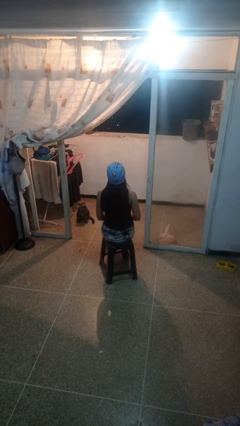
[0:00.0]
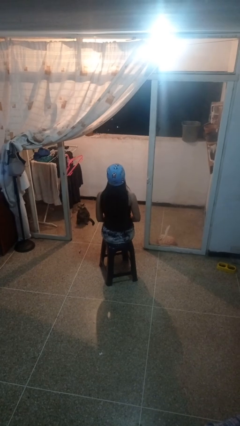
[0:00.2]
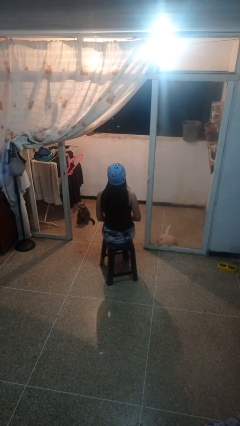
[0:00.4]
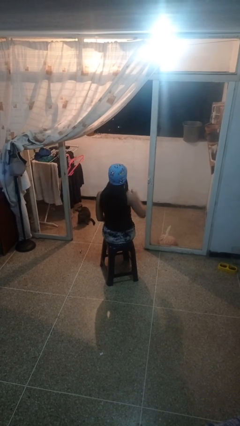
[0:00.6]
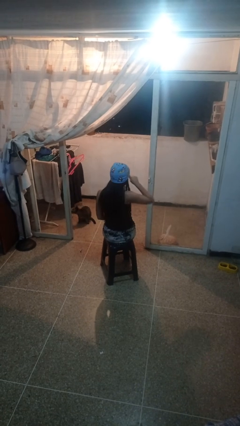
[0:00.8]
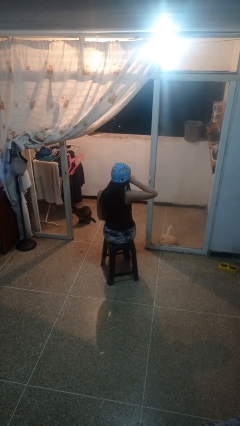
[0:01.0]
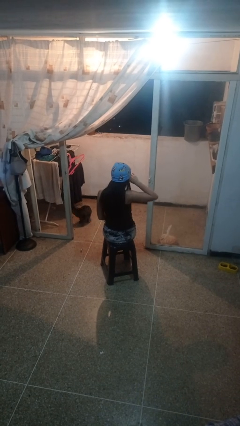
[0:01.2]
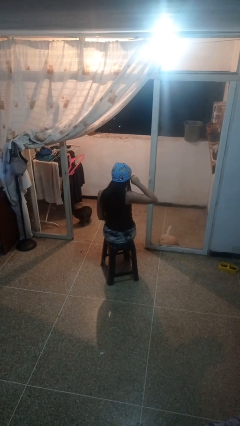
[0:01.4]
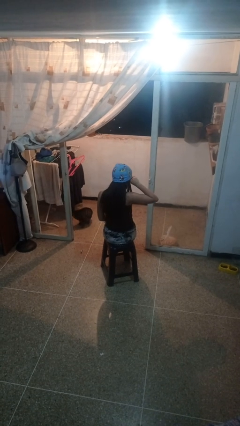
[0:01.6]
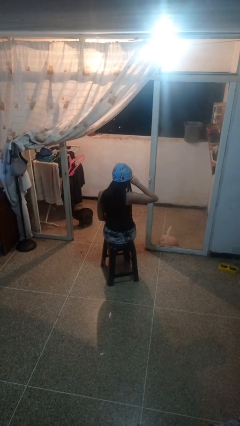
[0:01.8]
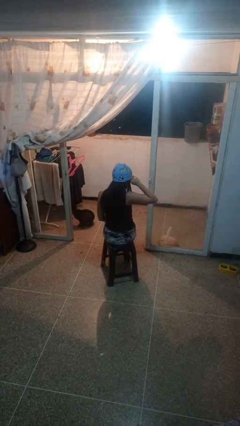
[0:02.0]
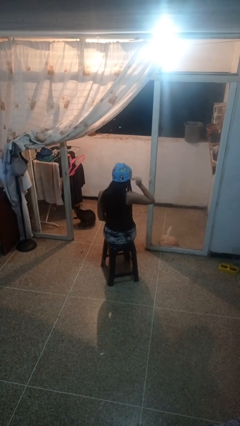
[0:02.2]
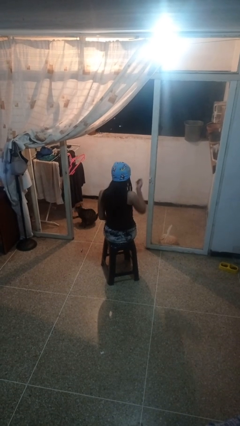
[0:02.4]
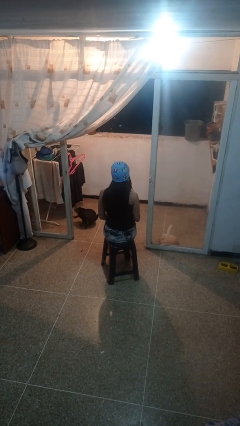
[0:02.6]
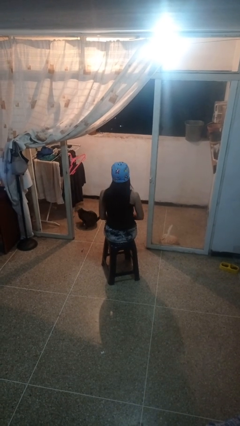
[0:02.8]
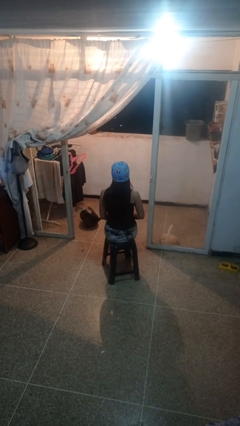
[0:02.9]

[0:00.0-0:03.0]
person rubs eyes

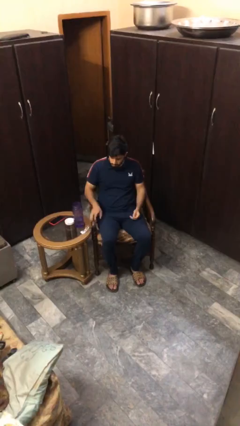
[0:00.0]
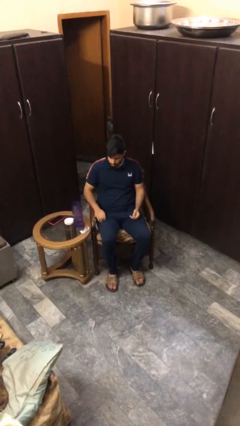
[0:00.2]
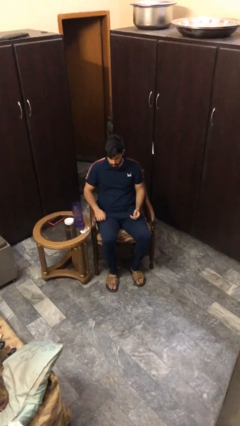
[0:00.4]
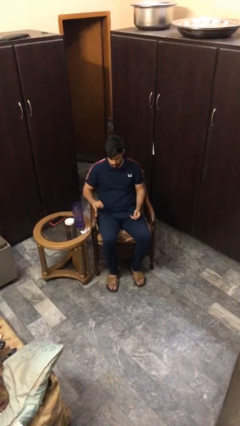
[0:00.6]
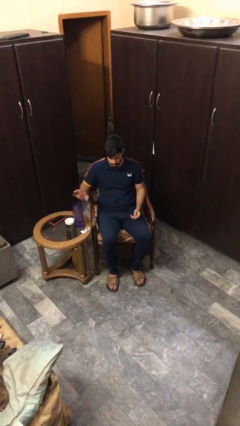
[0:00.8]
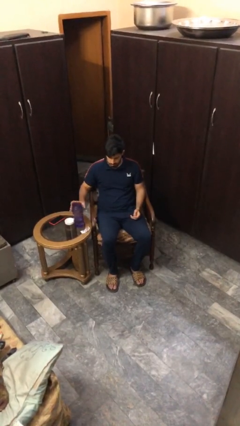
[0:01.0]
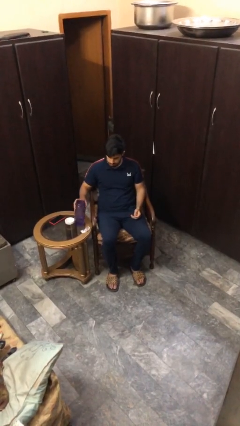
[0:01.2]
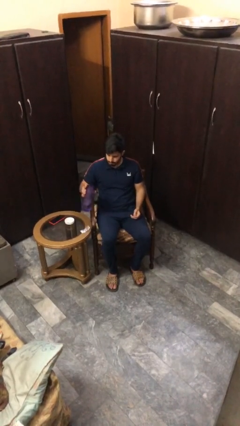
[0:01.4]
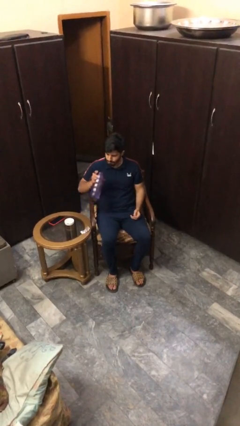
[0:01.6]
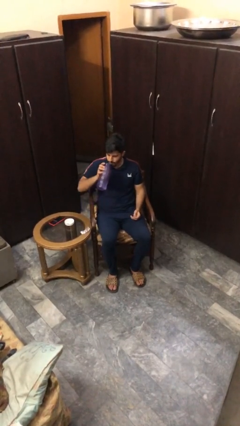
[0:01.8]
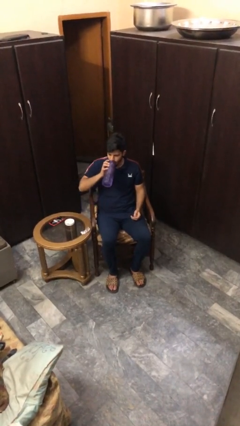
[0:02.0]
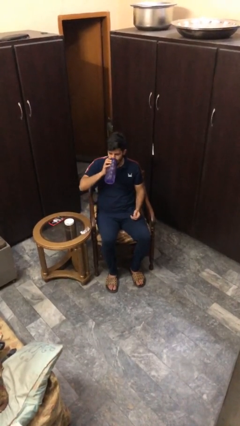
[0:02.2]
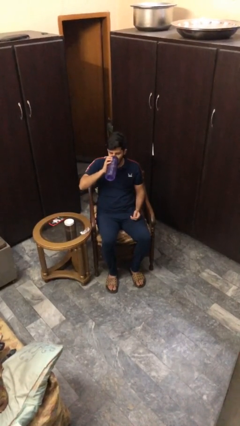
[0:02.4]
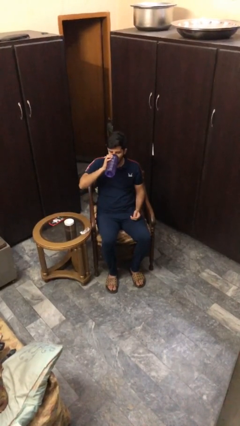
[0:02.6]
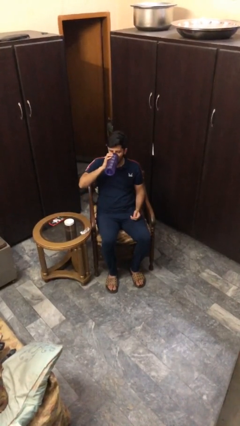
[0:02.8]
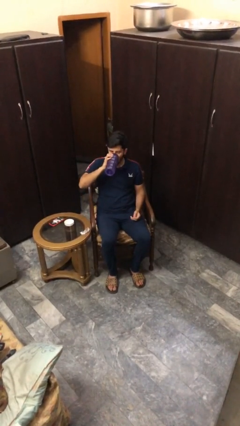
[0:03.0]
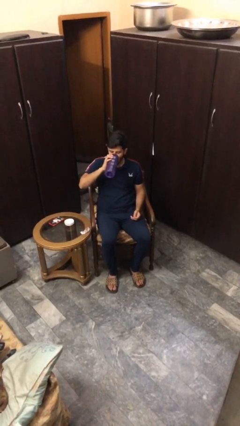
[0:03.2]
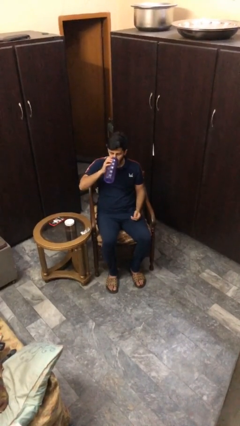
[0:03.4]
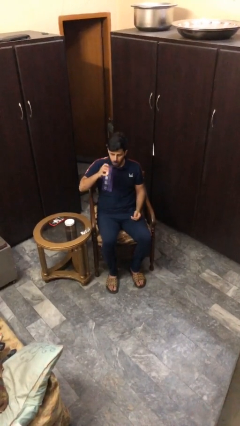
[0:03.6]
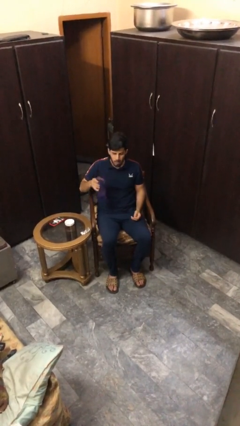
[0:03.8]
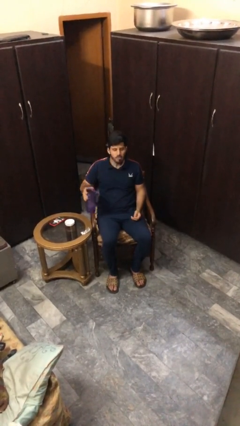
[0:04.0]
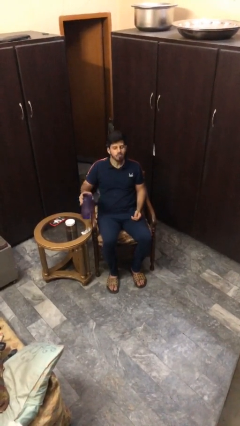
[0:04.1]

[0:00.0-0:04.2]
person drinks from cup

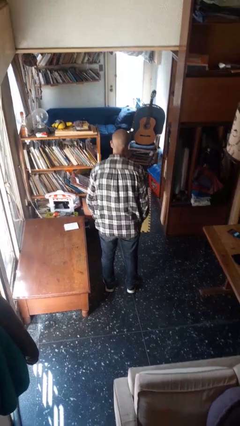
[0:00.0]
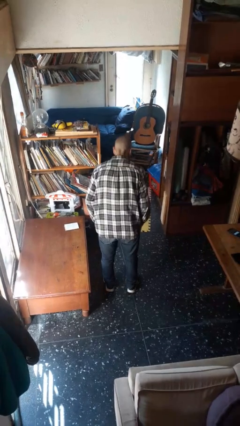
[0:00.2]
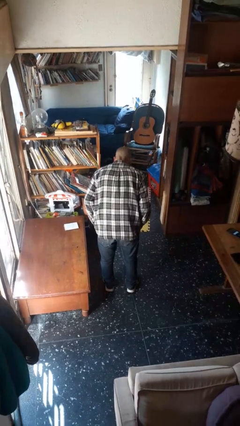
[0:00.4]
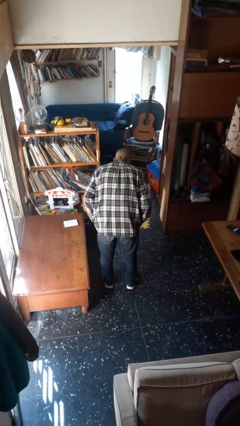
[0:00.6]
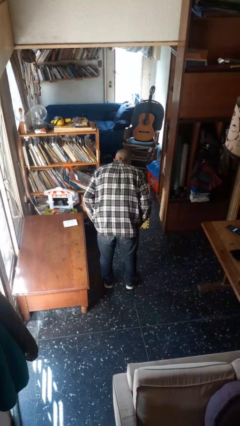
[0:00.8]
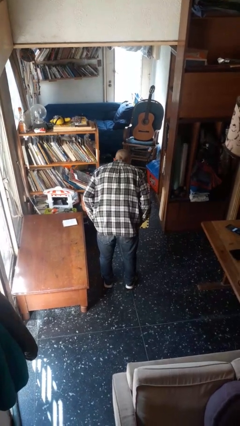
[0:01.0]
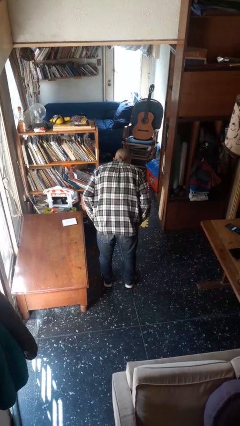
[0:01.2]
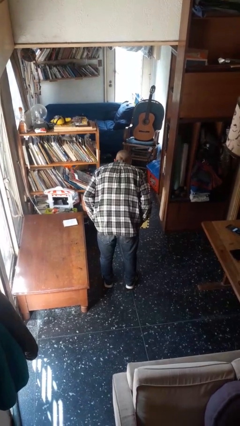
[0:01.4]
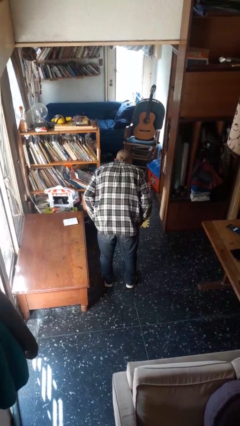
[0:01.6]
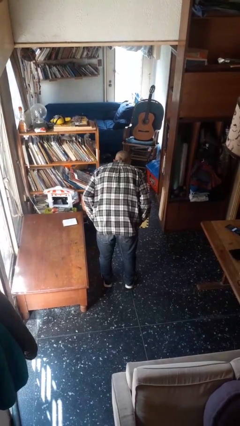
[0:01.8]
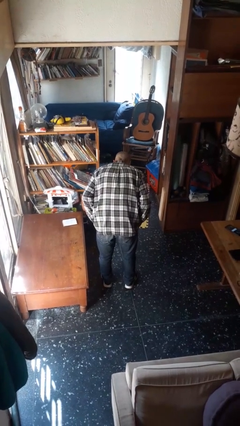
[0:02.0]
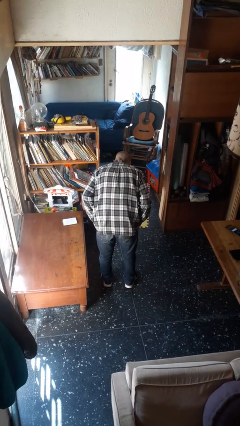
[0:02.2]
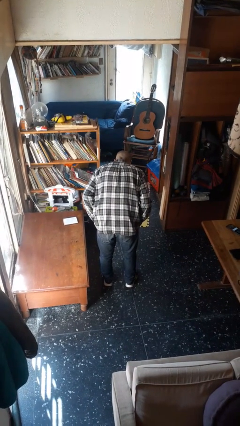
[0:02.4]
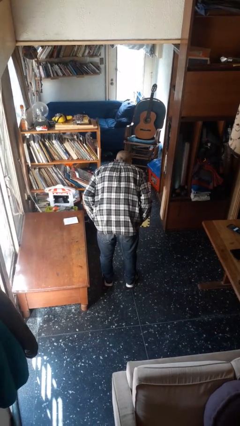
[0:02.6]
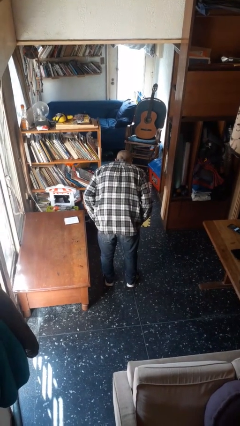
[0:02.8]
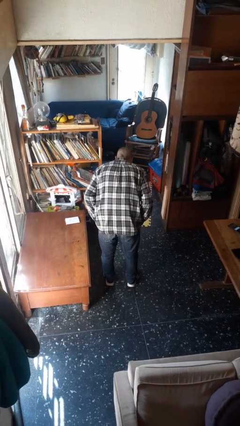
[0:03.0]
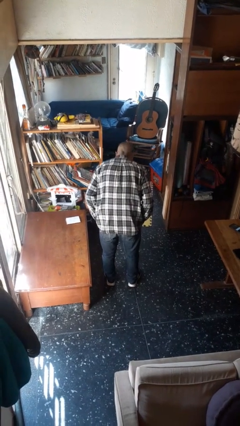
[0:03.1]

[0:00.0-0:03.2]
person bows

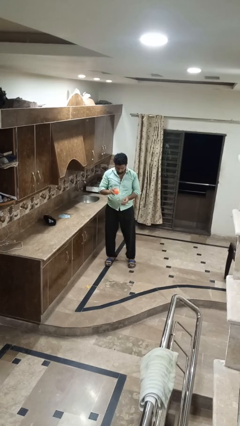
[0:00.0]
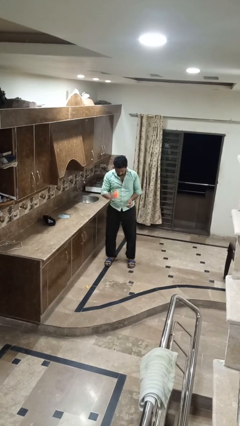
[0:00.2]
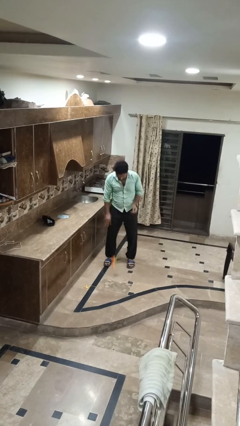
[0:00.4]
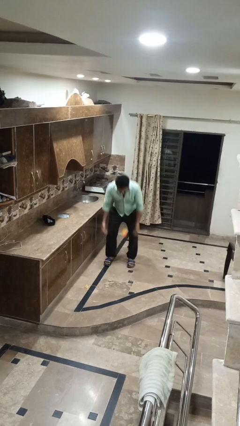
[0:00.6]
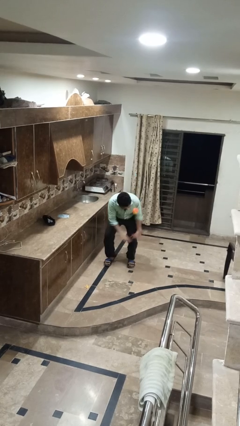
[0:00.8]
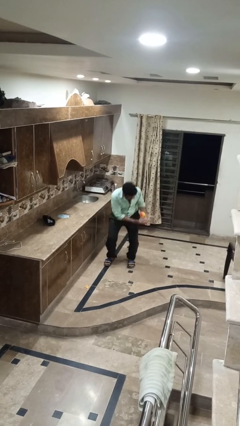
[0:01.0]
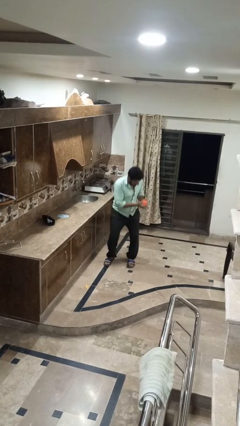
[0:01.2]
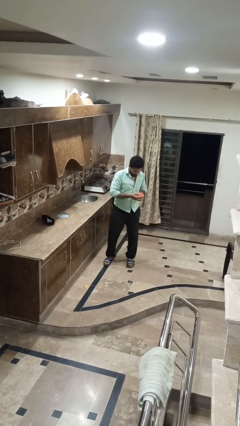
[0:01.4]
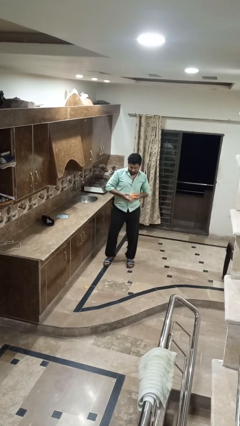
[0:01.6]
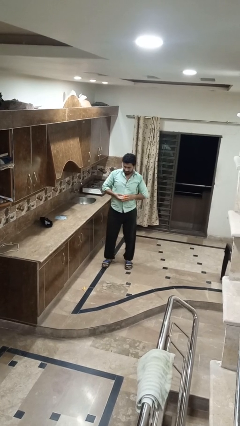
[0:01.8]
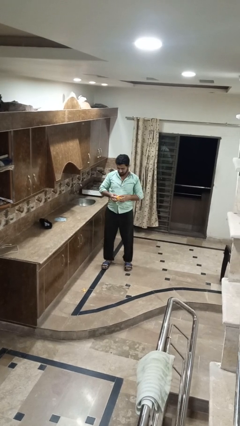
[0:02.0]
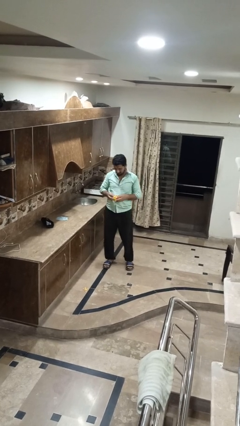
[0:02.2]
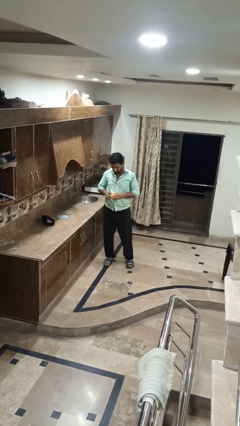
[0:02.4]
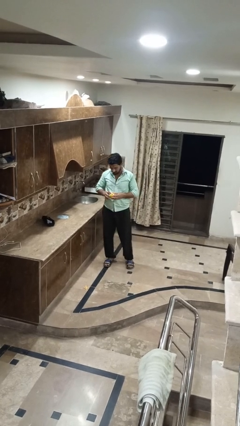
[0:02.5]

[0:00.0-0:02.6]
person bounces ball on floor

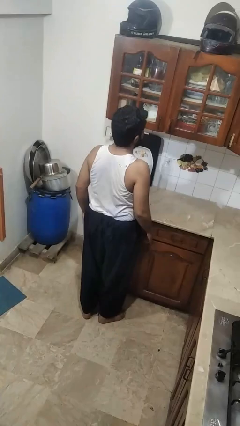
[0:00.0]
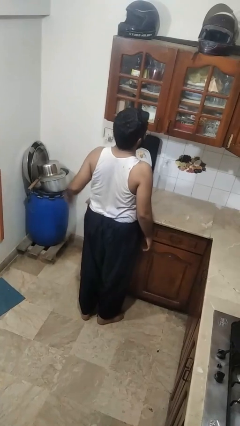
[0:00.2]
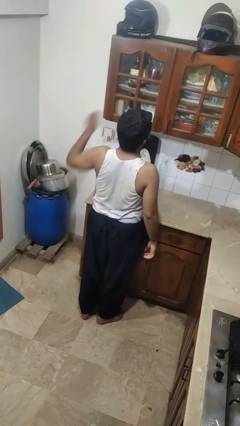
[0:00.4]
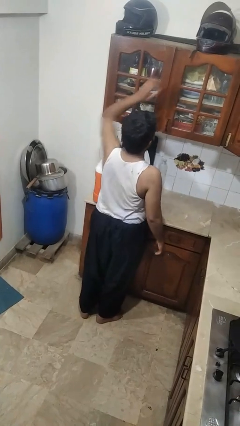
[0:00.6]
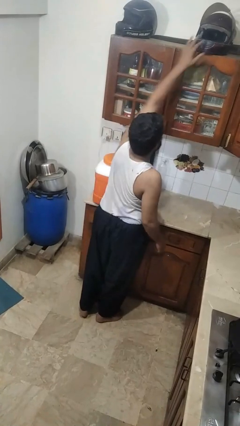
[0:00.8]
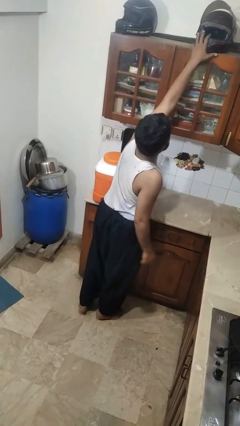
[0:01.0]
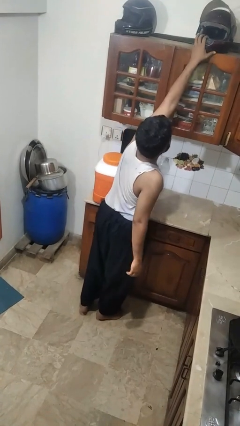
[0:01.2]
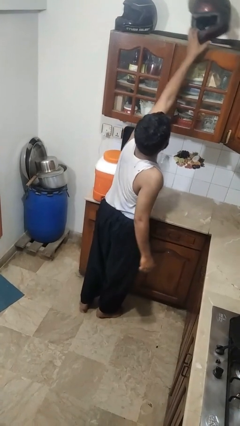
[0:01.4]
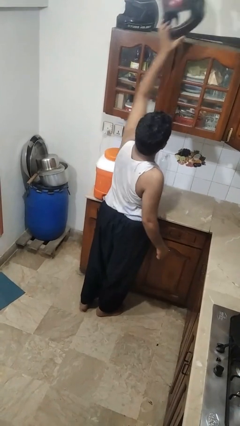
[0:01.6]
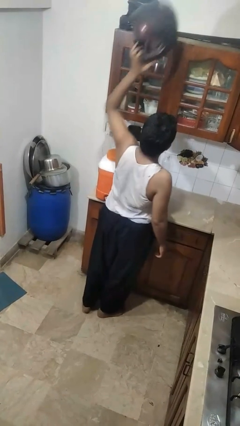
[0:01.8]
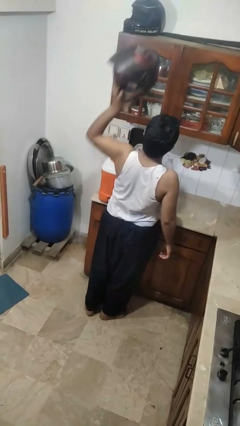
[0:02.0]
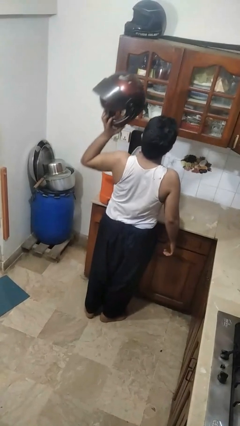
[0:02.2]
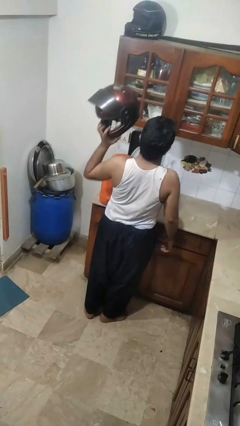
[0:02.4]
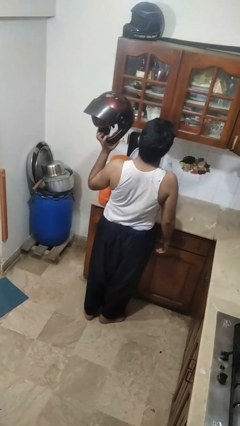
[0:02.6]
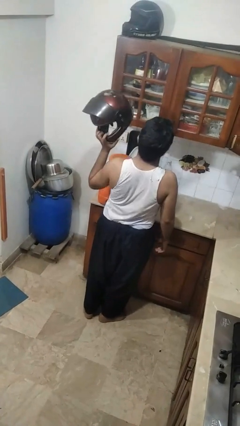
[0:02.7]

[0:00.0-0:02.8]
person picks up object from shelf

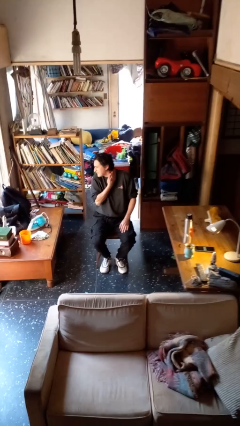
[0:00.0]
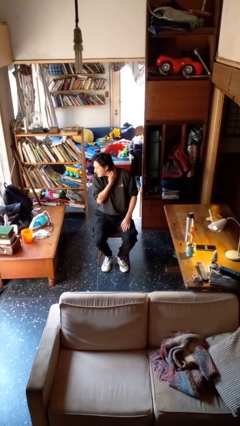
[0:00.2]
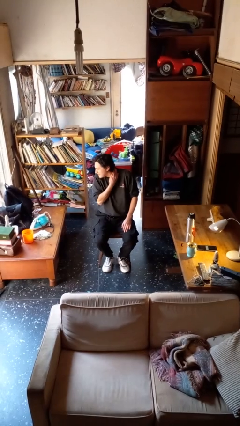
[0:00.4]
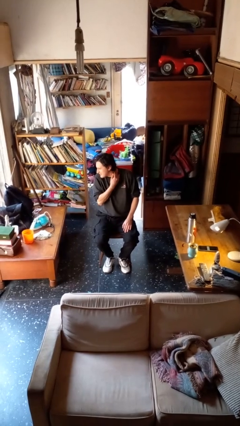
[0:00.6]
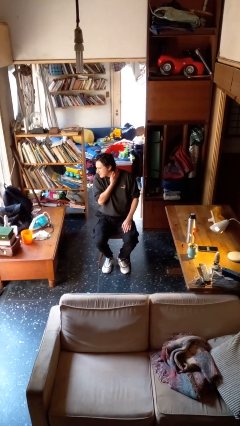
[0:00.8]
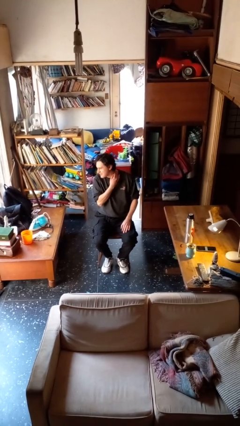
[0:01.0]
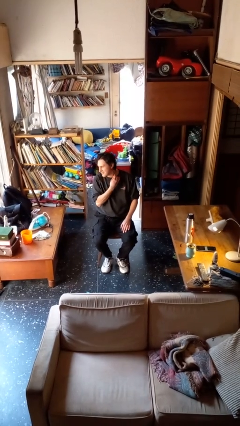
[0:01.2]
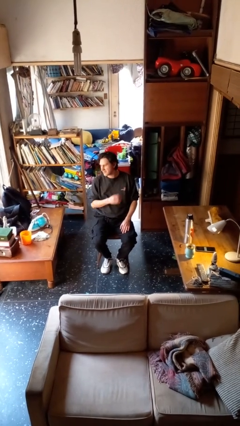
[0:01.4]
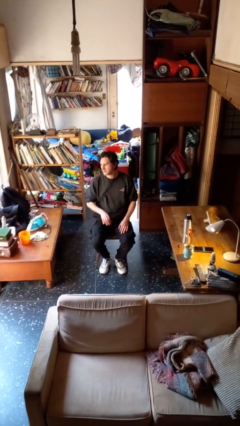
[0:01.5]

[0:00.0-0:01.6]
person swats bug
